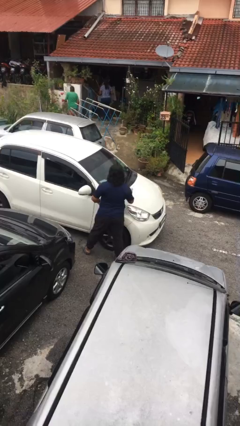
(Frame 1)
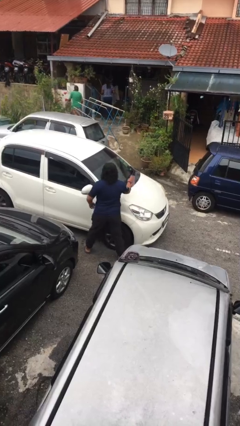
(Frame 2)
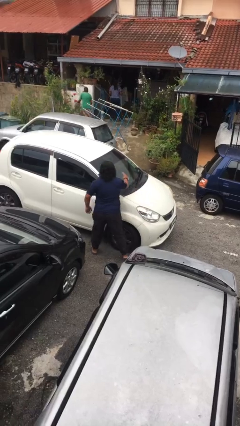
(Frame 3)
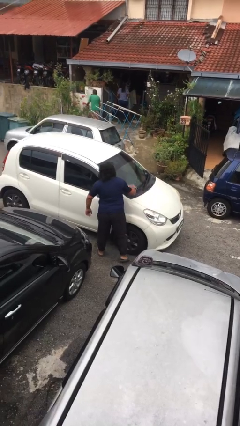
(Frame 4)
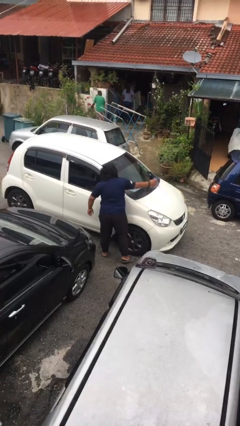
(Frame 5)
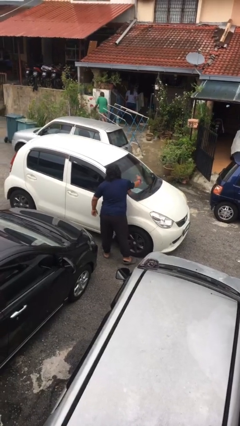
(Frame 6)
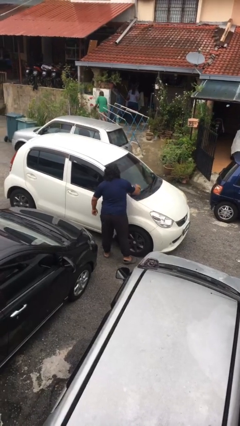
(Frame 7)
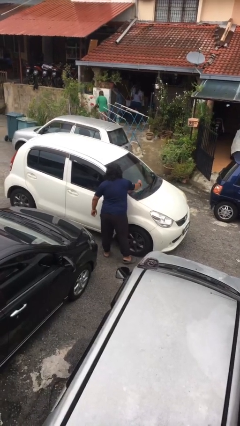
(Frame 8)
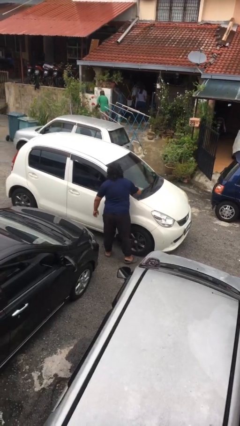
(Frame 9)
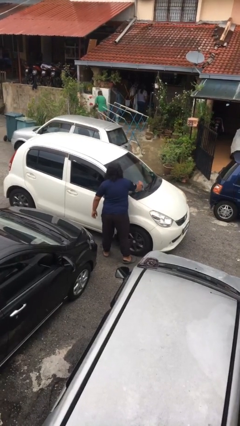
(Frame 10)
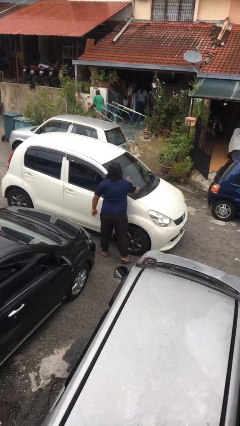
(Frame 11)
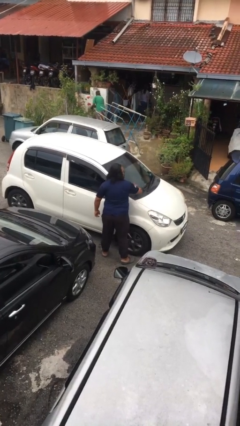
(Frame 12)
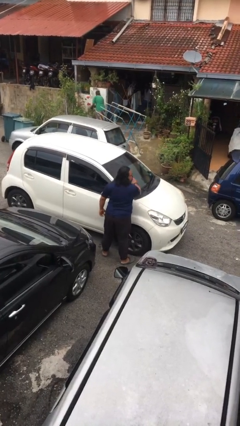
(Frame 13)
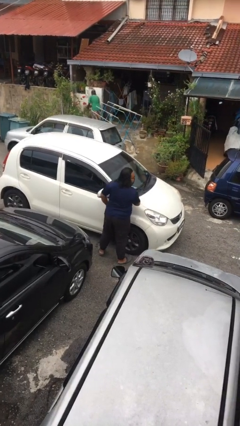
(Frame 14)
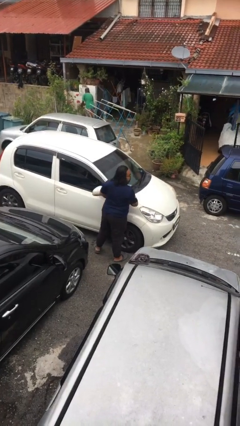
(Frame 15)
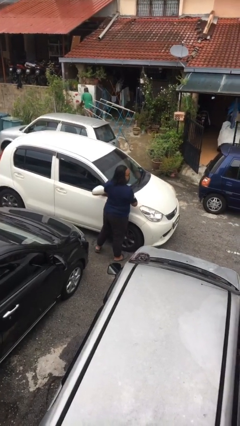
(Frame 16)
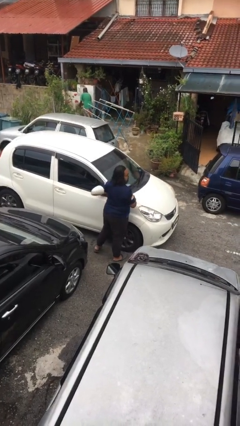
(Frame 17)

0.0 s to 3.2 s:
person polishes car with rag

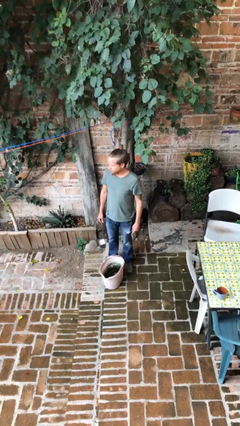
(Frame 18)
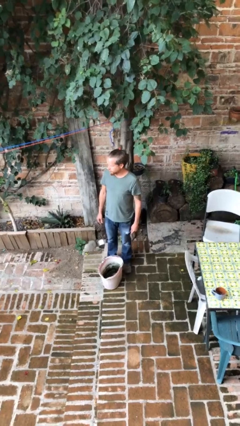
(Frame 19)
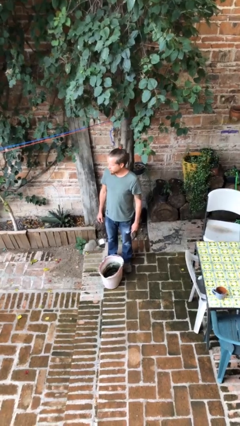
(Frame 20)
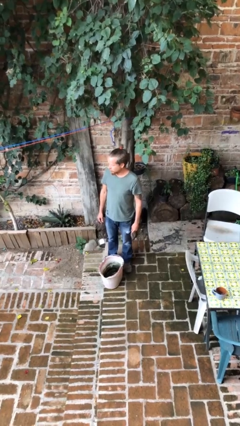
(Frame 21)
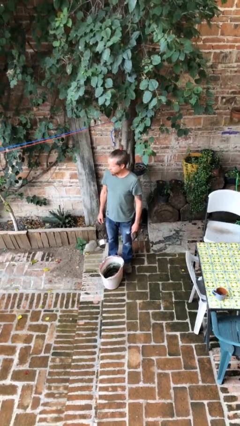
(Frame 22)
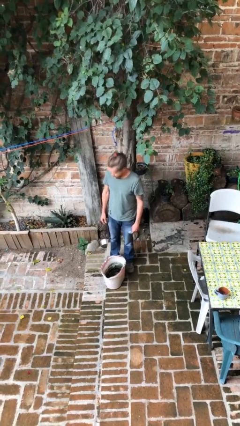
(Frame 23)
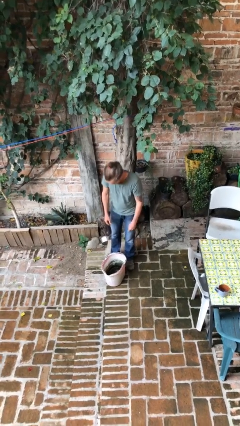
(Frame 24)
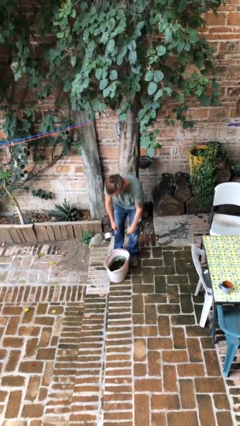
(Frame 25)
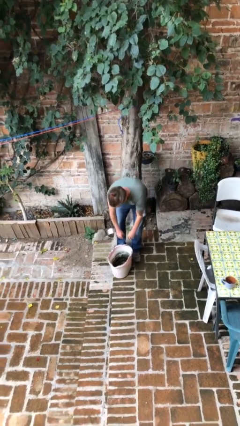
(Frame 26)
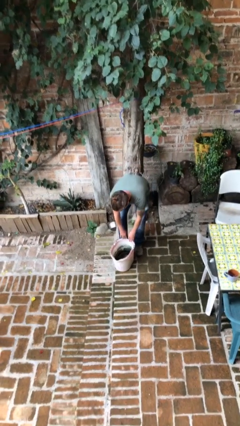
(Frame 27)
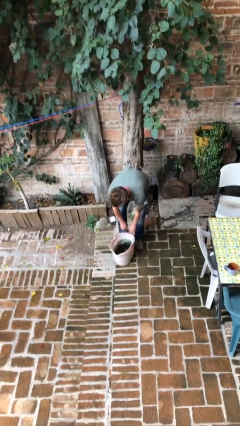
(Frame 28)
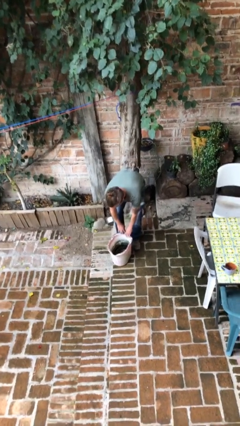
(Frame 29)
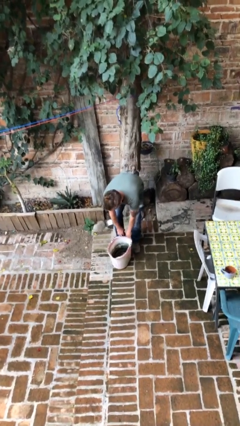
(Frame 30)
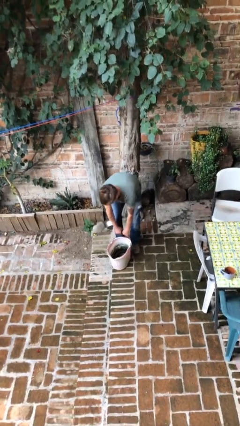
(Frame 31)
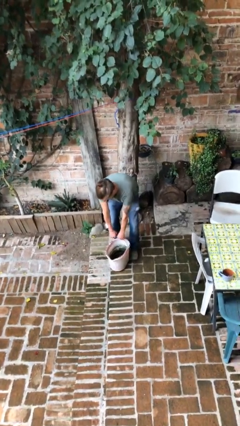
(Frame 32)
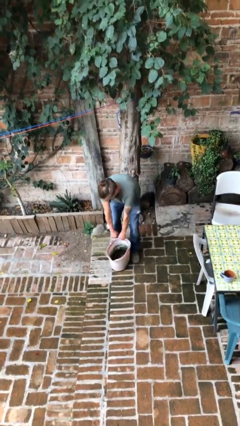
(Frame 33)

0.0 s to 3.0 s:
person picks up object from floor

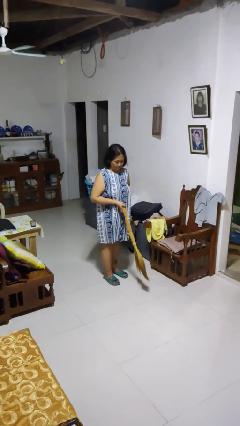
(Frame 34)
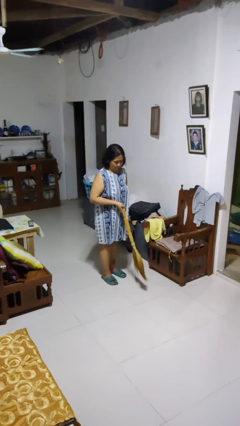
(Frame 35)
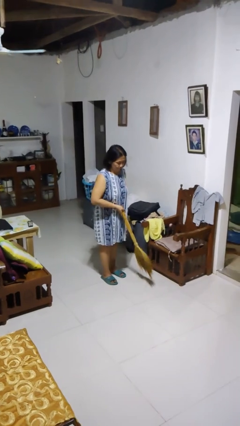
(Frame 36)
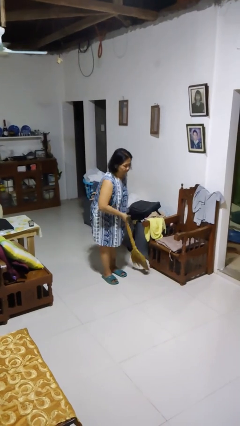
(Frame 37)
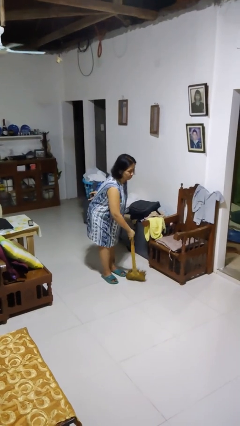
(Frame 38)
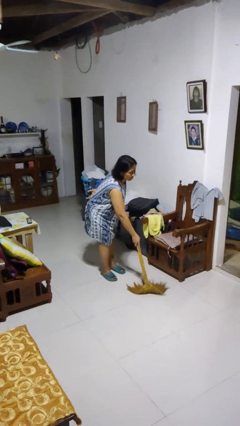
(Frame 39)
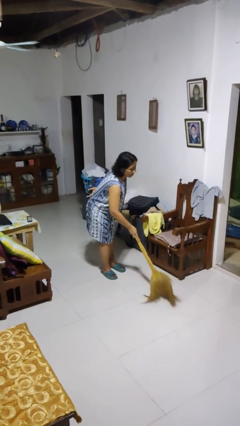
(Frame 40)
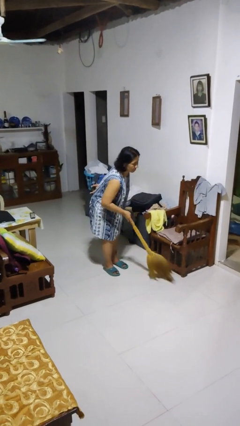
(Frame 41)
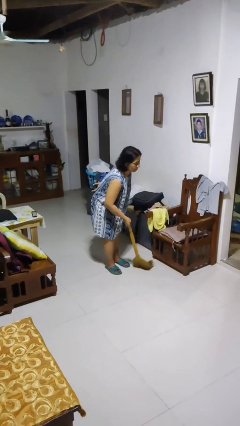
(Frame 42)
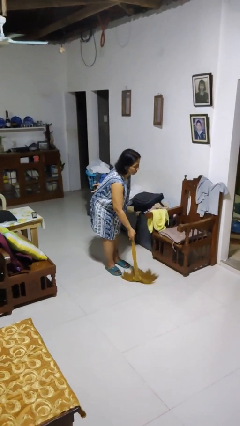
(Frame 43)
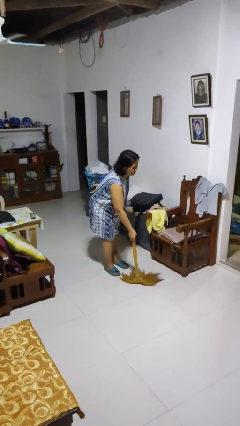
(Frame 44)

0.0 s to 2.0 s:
person sweeps floor

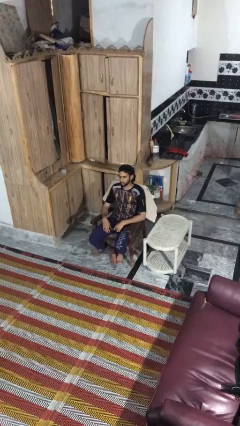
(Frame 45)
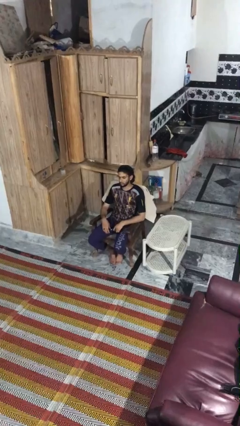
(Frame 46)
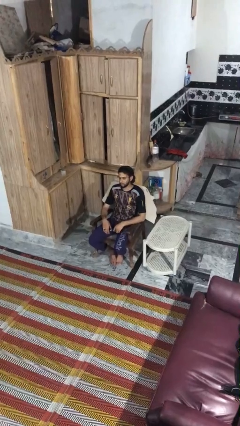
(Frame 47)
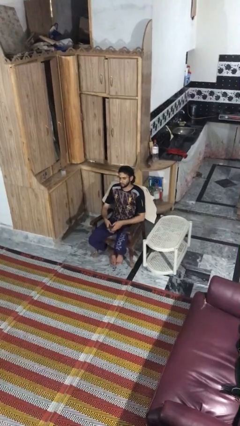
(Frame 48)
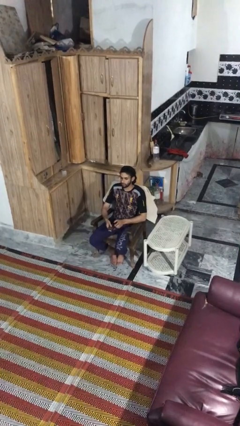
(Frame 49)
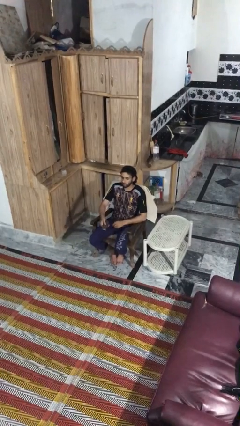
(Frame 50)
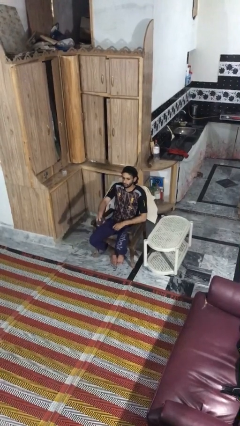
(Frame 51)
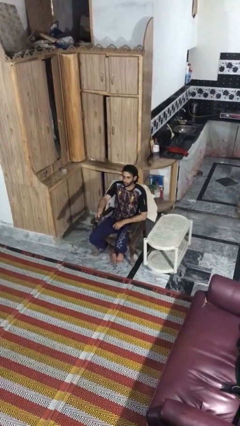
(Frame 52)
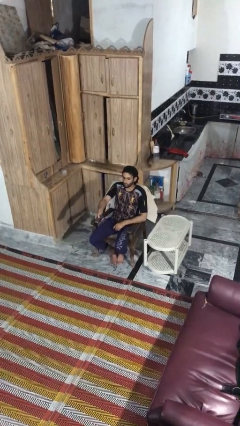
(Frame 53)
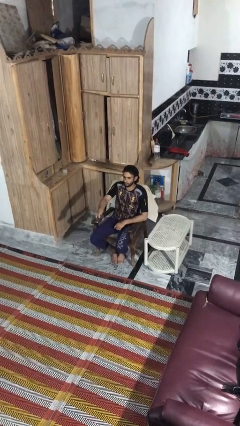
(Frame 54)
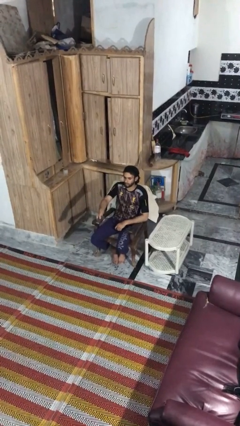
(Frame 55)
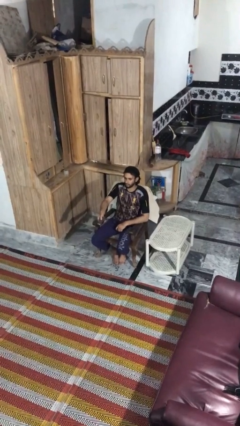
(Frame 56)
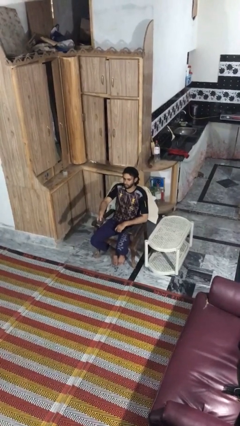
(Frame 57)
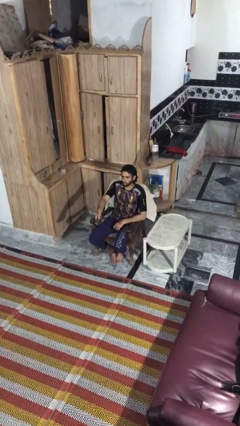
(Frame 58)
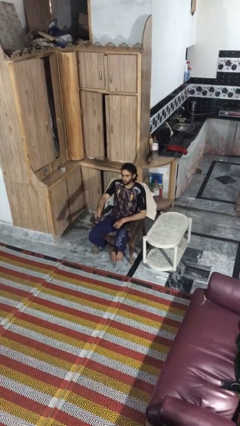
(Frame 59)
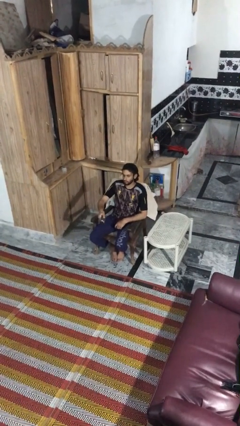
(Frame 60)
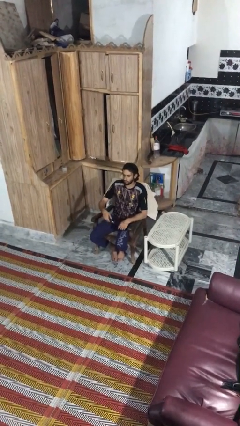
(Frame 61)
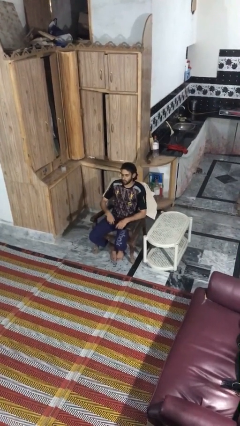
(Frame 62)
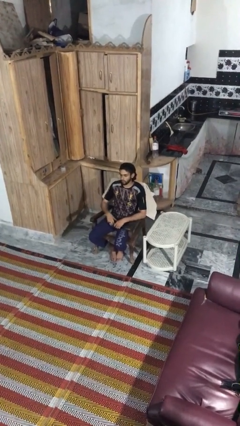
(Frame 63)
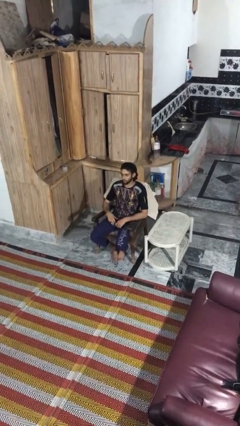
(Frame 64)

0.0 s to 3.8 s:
person uses television remote

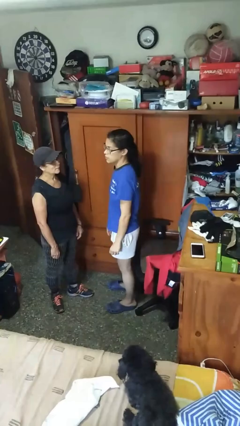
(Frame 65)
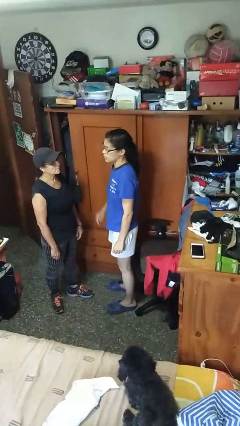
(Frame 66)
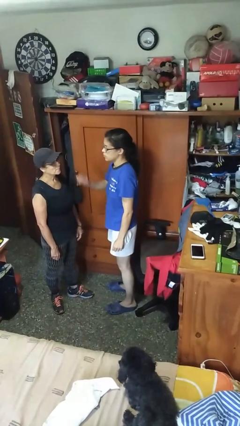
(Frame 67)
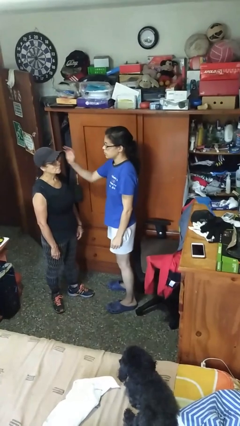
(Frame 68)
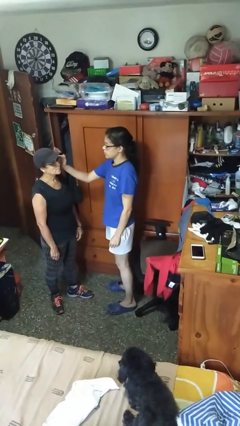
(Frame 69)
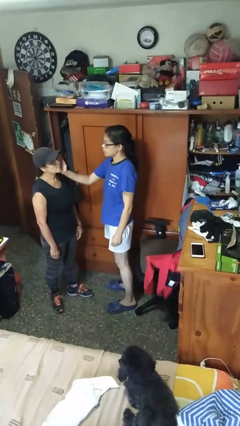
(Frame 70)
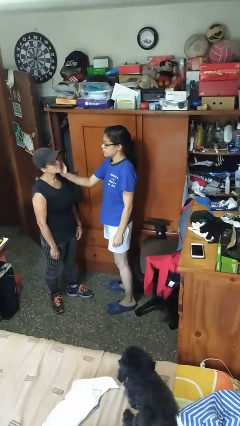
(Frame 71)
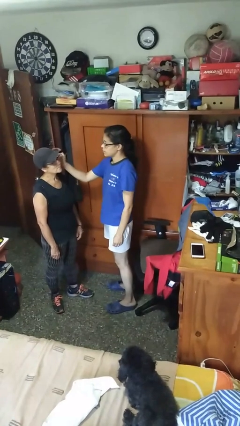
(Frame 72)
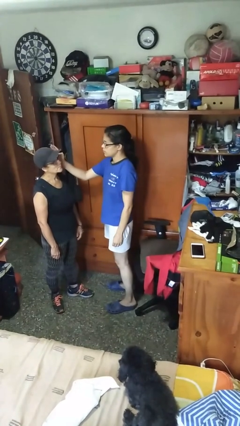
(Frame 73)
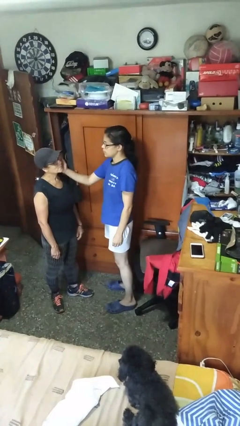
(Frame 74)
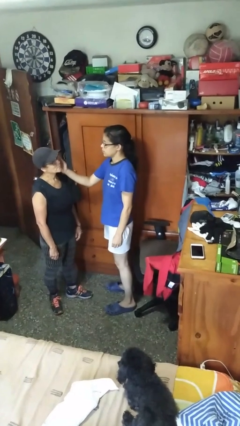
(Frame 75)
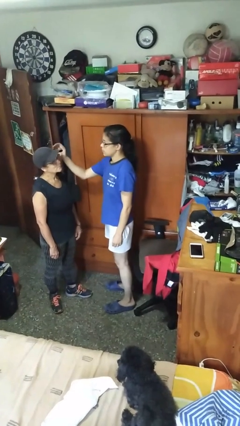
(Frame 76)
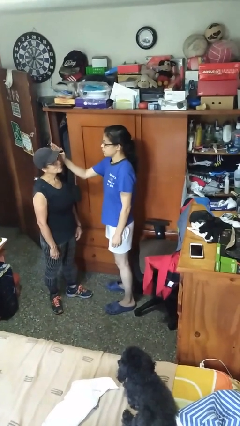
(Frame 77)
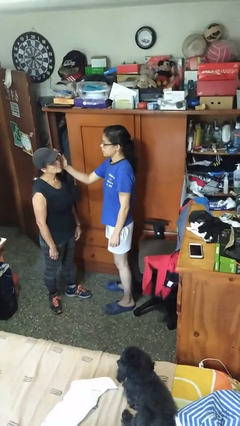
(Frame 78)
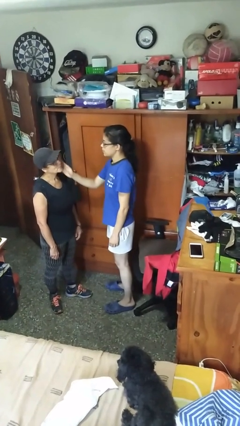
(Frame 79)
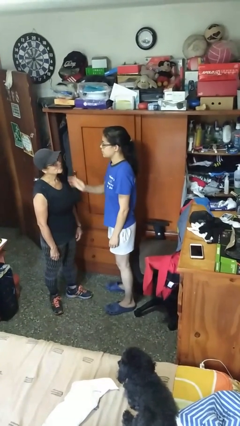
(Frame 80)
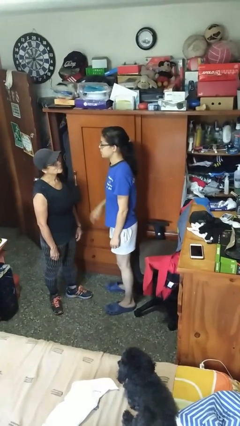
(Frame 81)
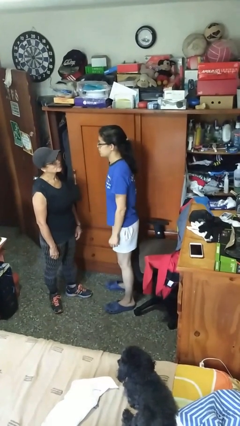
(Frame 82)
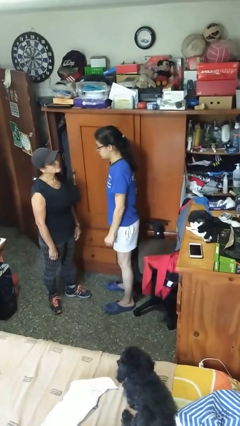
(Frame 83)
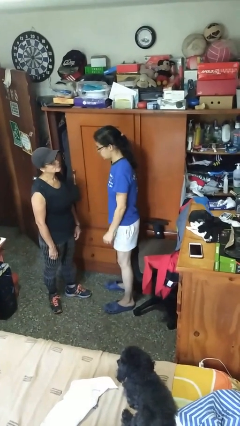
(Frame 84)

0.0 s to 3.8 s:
person touches face of person

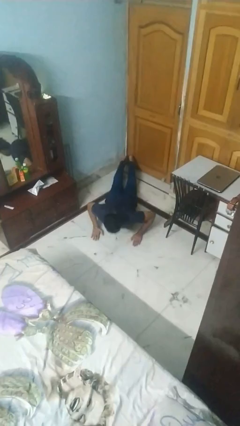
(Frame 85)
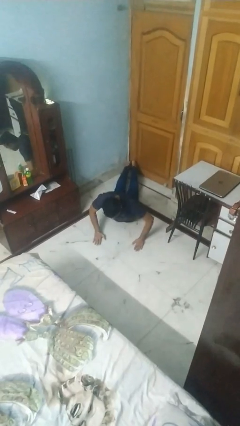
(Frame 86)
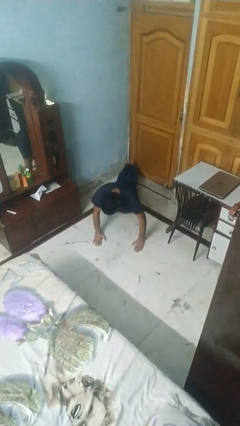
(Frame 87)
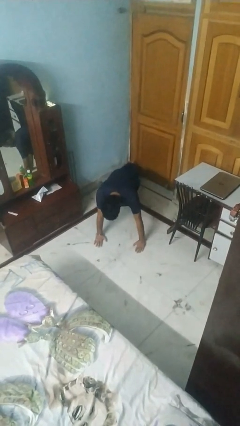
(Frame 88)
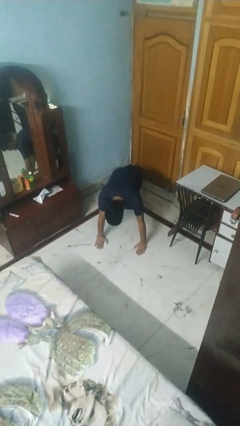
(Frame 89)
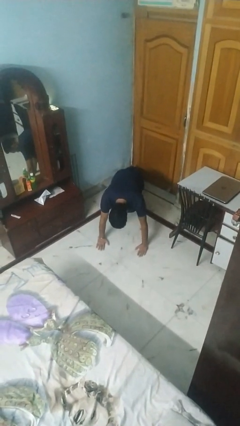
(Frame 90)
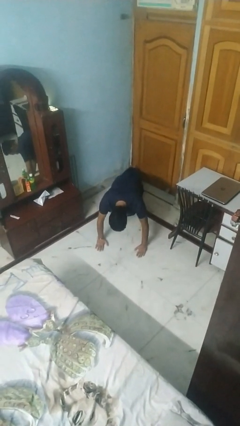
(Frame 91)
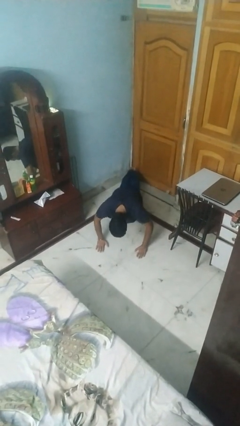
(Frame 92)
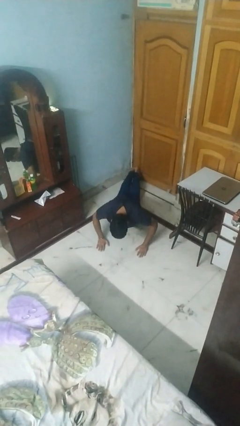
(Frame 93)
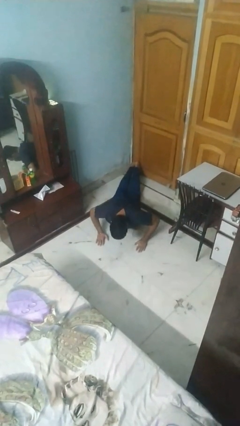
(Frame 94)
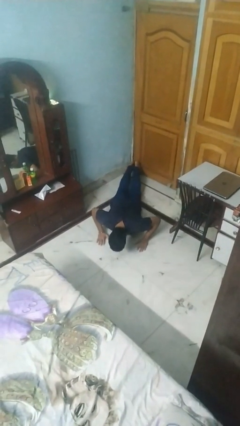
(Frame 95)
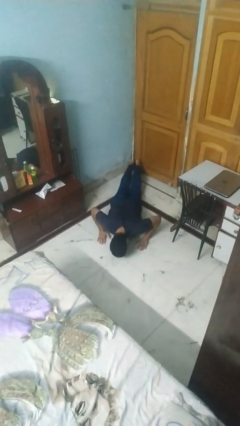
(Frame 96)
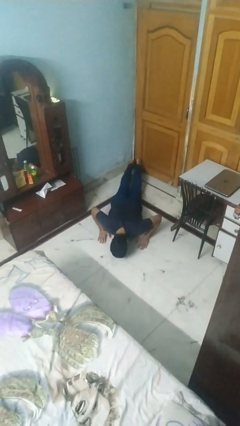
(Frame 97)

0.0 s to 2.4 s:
person exercises with pushup
